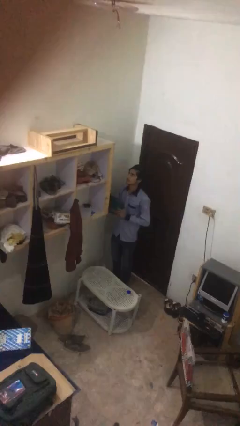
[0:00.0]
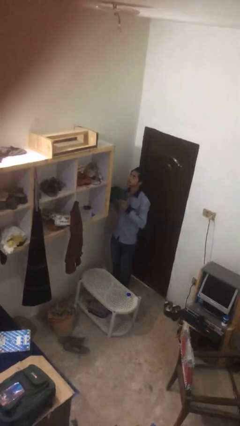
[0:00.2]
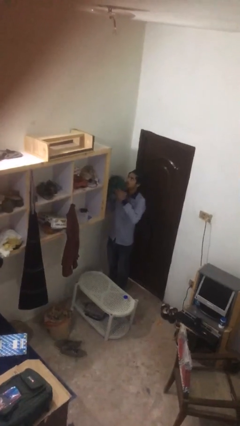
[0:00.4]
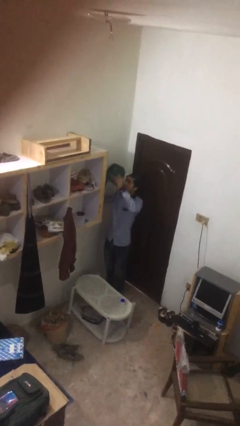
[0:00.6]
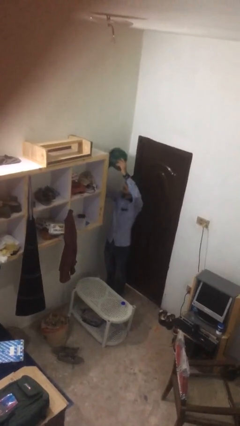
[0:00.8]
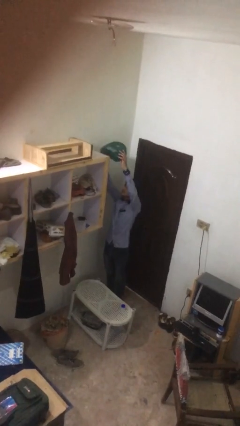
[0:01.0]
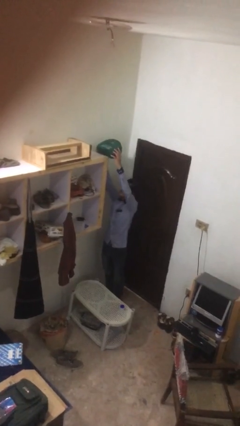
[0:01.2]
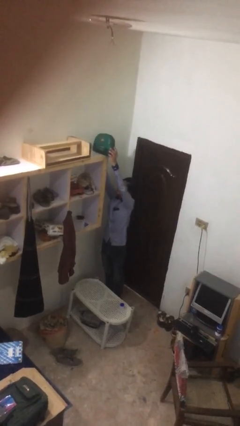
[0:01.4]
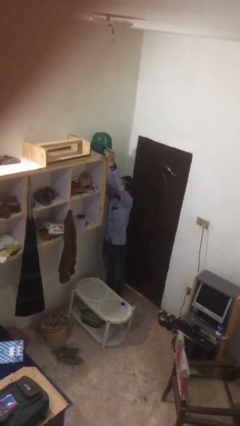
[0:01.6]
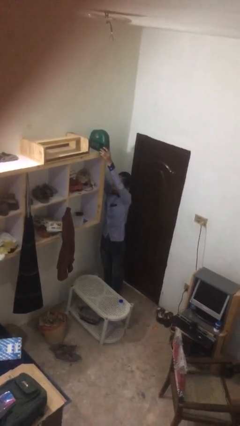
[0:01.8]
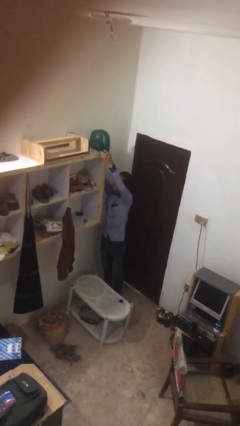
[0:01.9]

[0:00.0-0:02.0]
person puts down object on shelf

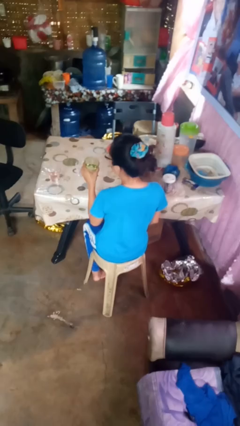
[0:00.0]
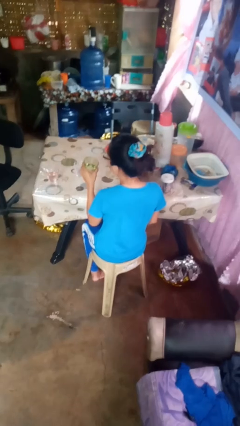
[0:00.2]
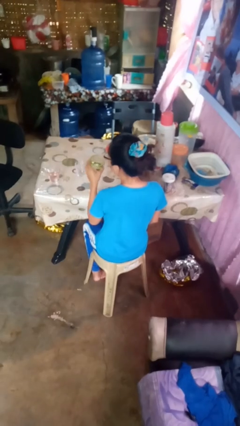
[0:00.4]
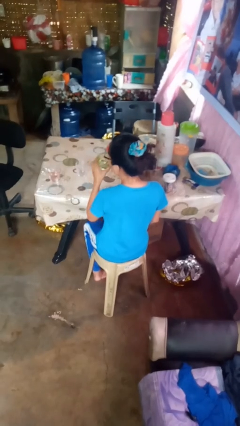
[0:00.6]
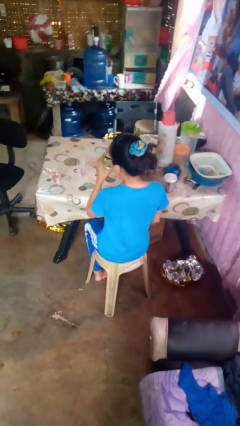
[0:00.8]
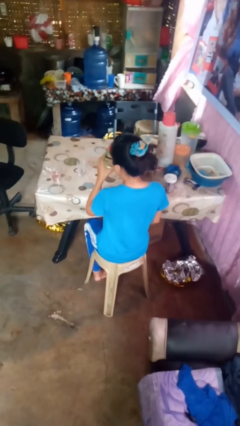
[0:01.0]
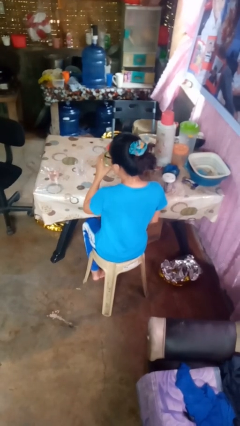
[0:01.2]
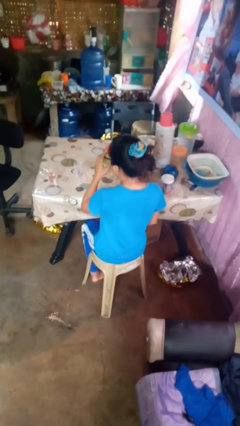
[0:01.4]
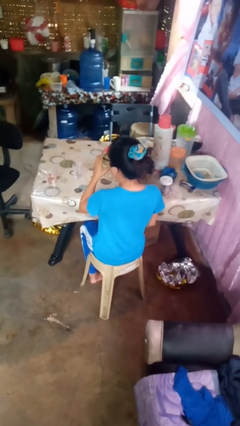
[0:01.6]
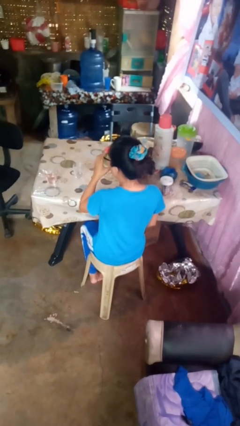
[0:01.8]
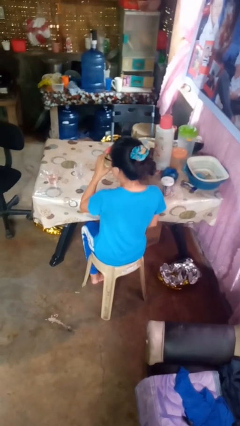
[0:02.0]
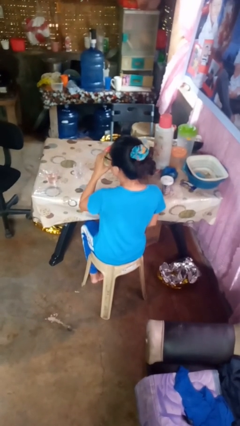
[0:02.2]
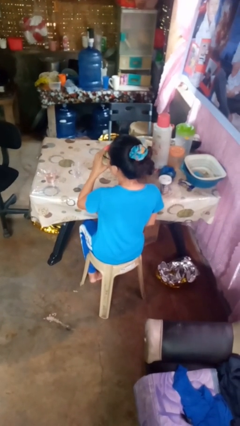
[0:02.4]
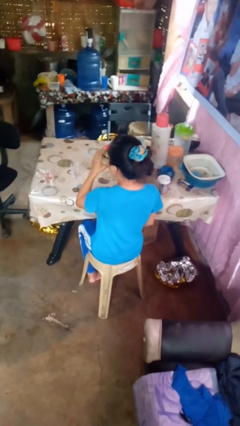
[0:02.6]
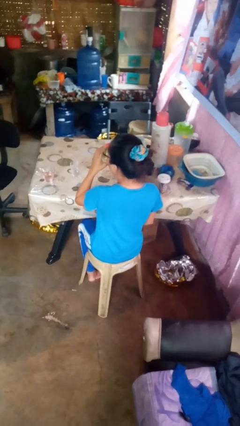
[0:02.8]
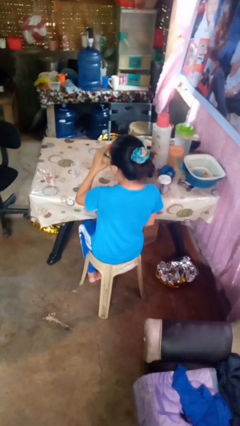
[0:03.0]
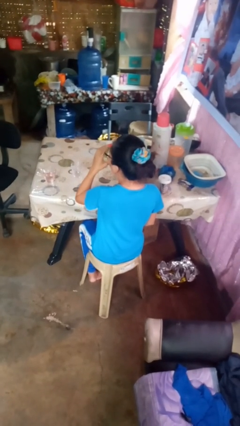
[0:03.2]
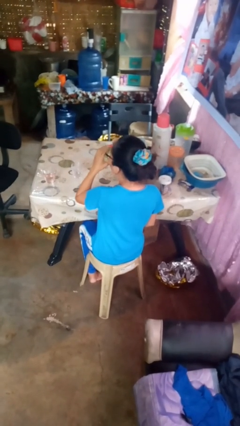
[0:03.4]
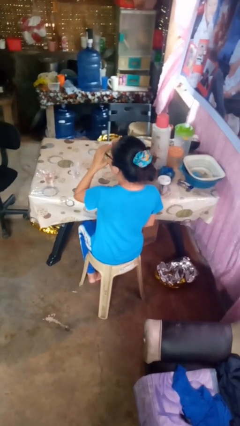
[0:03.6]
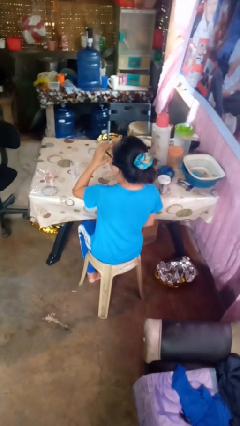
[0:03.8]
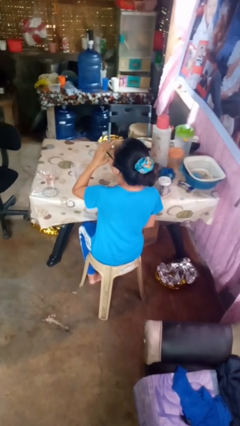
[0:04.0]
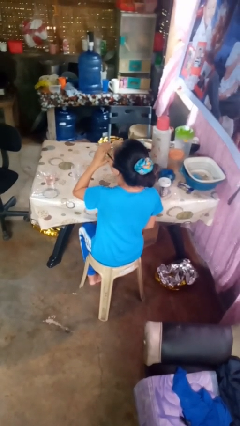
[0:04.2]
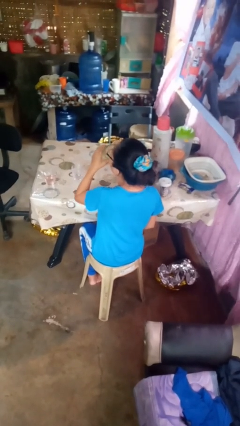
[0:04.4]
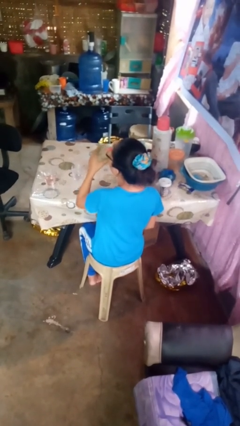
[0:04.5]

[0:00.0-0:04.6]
person drinks from shotglass

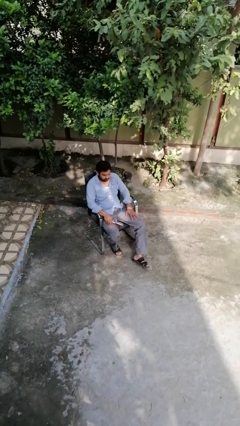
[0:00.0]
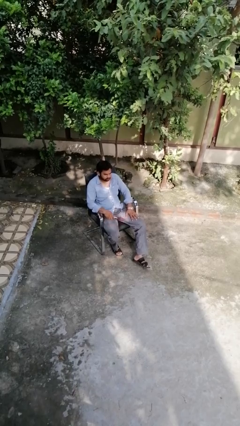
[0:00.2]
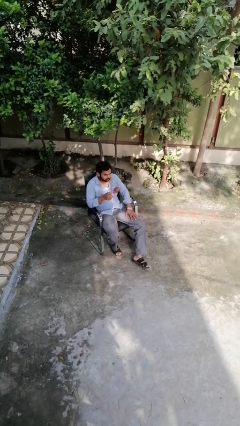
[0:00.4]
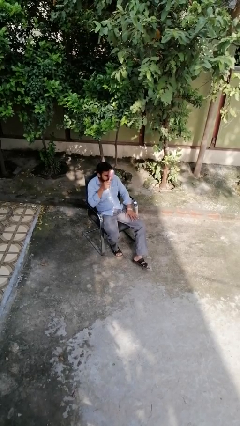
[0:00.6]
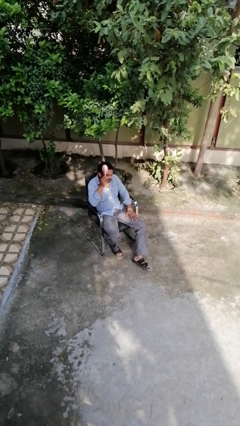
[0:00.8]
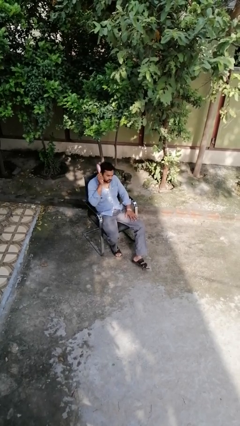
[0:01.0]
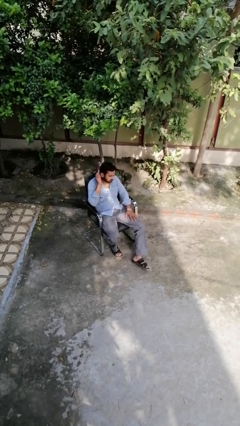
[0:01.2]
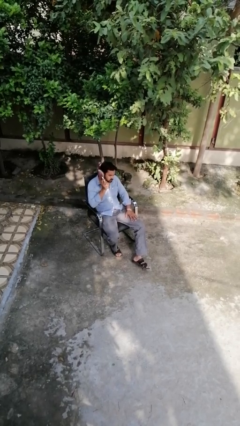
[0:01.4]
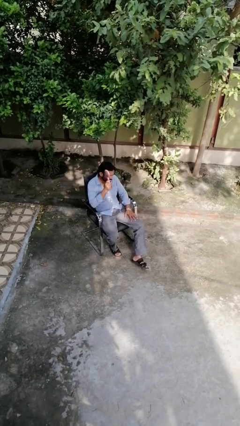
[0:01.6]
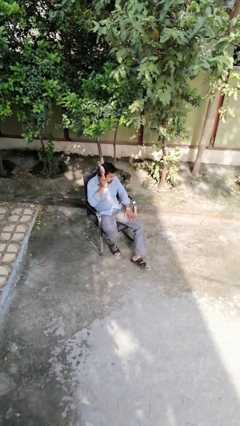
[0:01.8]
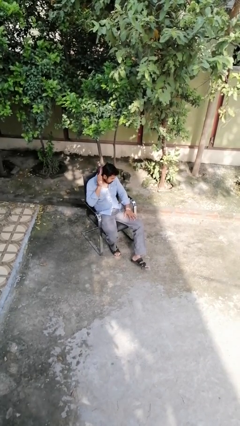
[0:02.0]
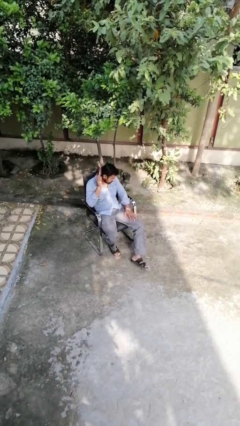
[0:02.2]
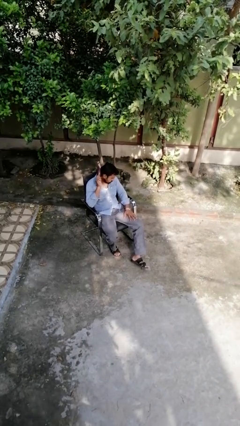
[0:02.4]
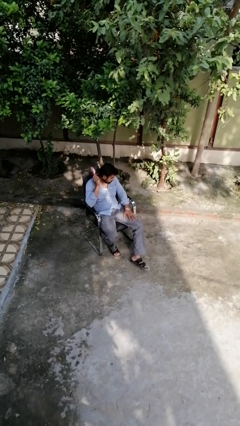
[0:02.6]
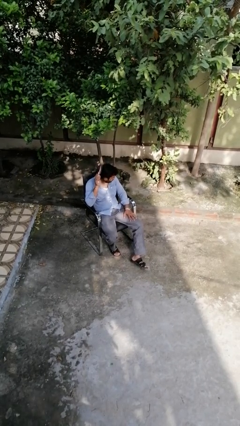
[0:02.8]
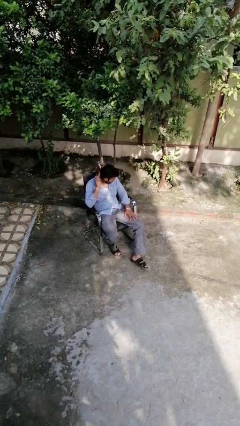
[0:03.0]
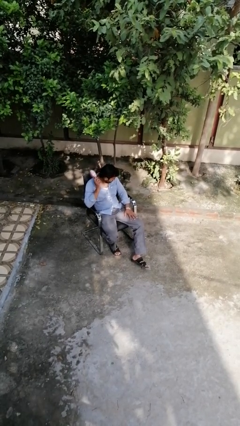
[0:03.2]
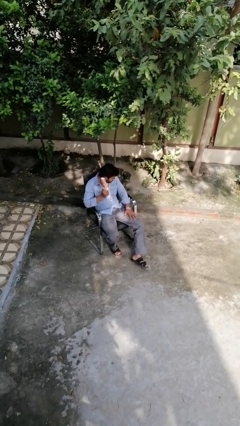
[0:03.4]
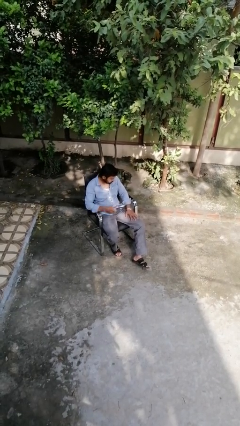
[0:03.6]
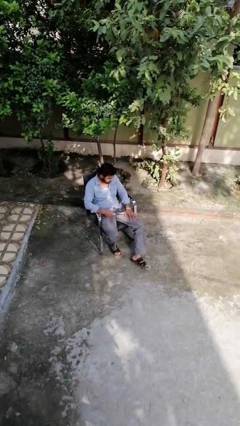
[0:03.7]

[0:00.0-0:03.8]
person brushes hair

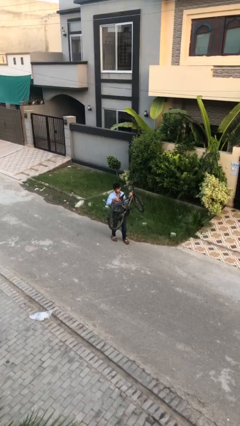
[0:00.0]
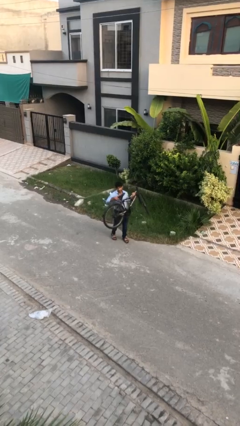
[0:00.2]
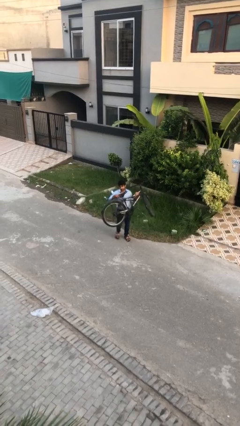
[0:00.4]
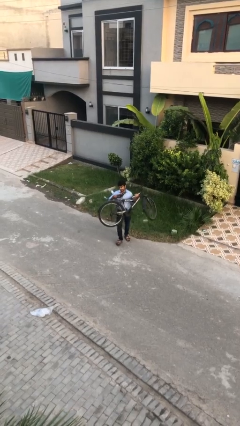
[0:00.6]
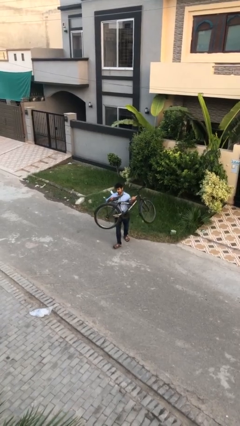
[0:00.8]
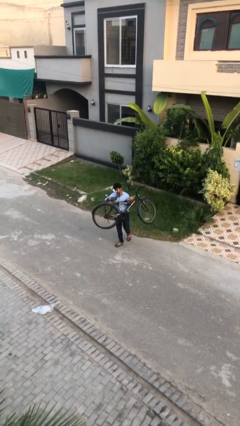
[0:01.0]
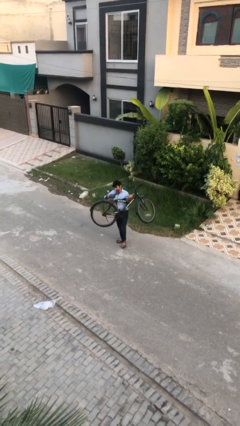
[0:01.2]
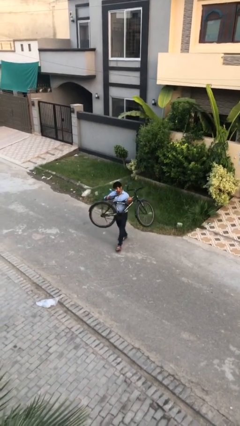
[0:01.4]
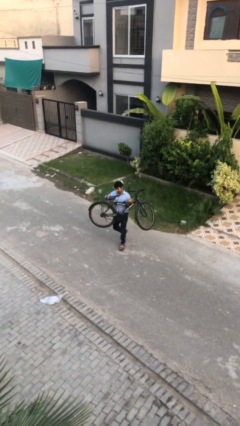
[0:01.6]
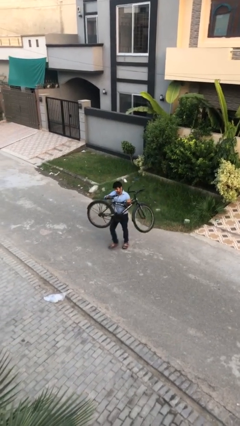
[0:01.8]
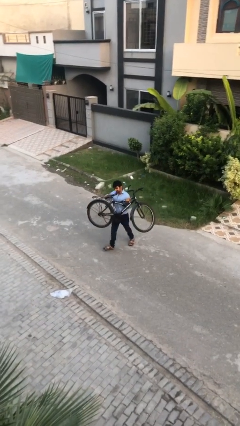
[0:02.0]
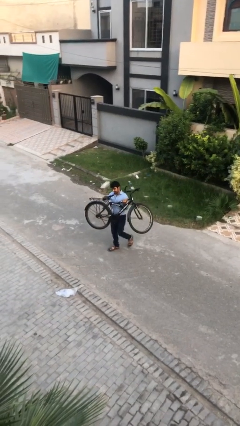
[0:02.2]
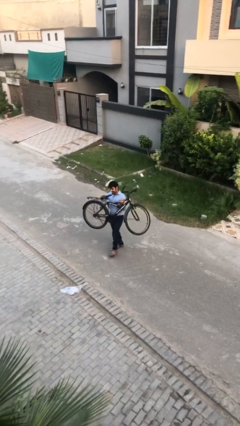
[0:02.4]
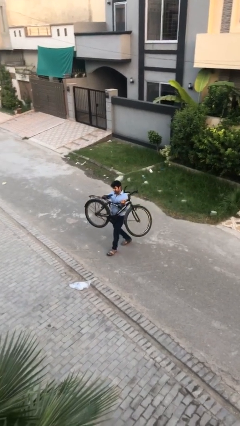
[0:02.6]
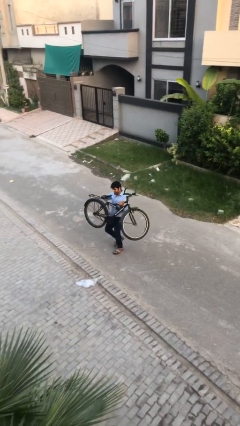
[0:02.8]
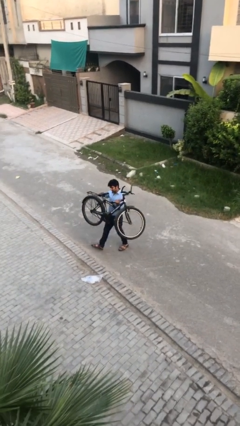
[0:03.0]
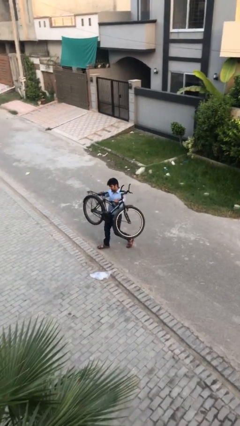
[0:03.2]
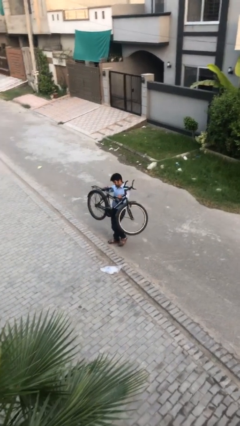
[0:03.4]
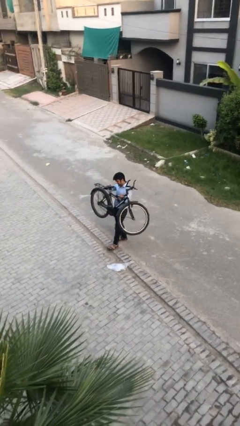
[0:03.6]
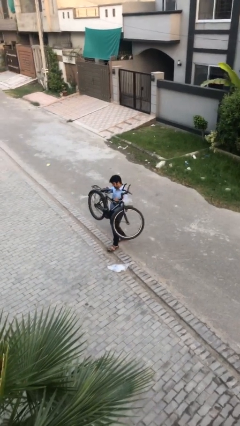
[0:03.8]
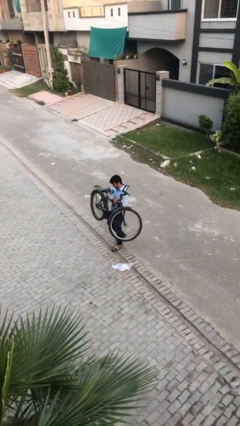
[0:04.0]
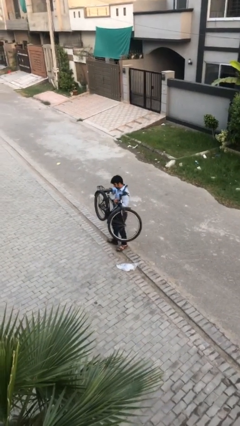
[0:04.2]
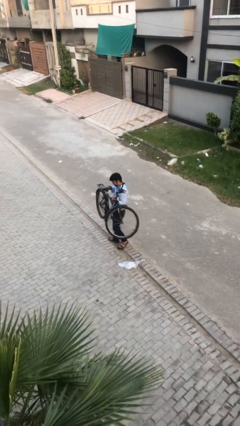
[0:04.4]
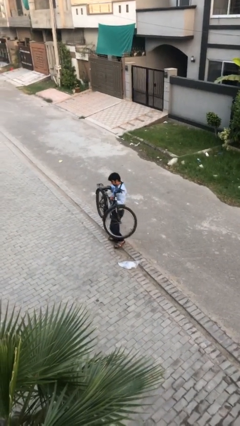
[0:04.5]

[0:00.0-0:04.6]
person carries heavy object

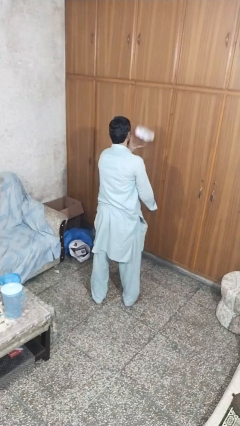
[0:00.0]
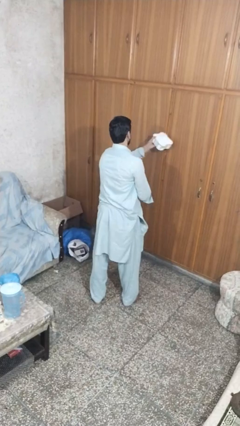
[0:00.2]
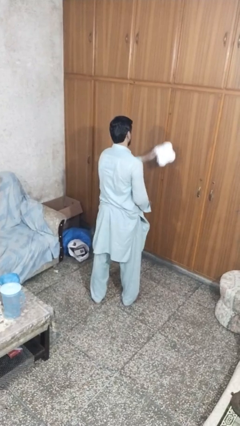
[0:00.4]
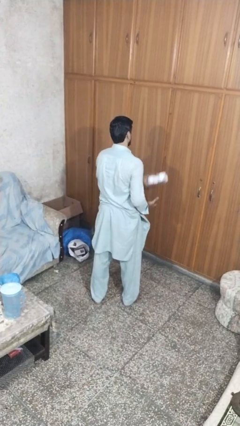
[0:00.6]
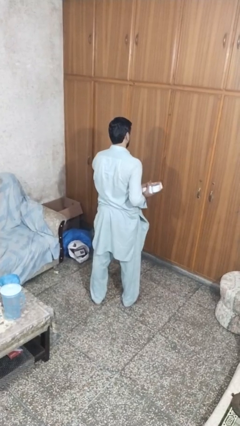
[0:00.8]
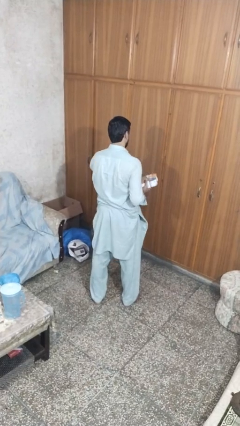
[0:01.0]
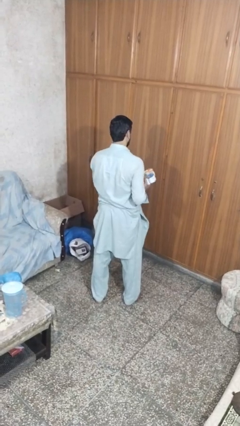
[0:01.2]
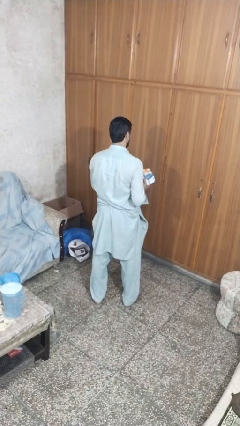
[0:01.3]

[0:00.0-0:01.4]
person catches dropped object

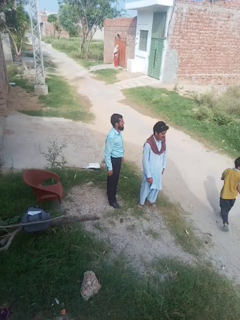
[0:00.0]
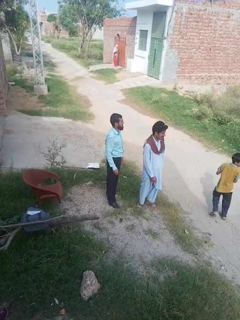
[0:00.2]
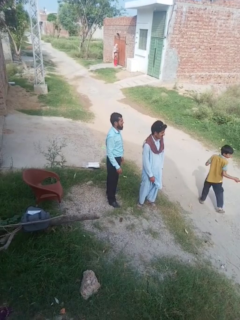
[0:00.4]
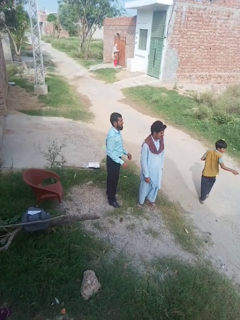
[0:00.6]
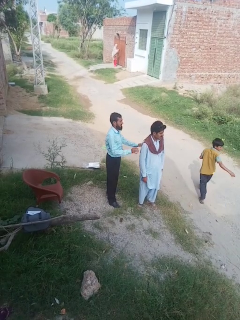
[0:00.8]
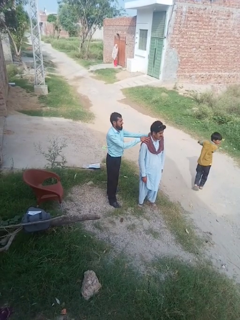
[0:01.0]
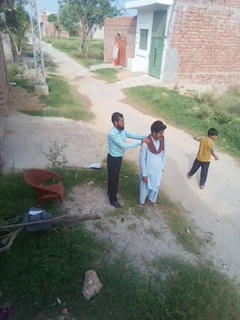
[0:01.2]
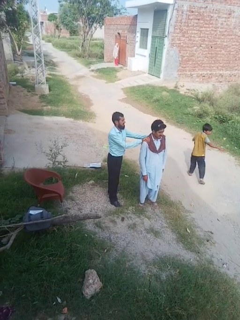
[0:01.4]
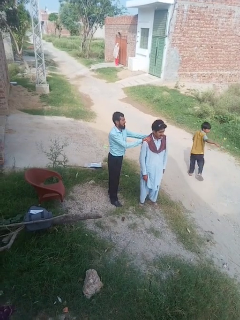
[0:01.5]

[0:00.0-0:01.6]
person grabs person by shoulder

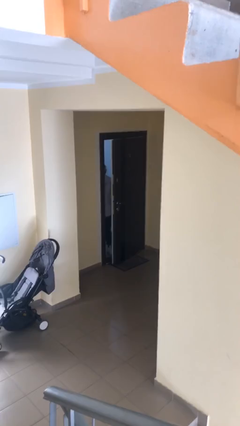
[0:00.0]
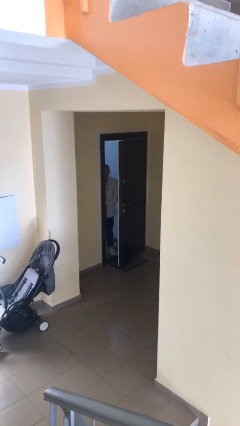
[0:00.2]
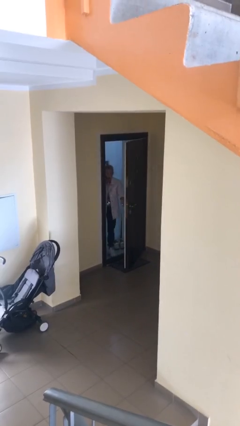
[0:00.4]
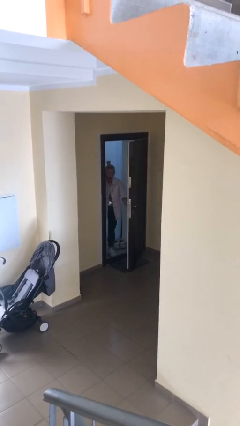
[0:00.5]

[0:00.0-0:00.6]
person opens facility door
